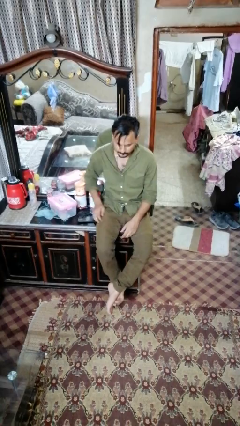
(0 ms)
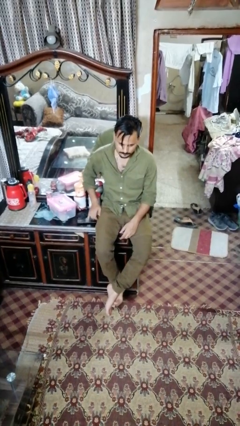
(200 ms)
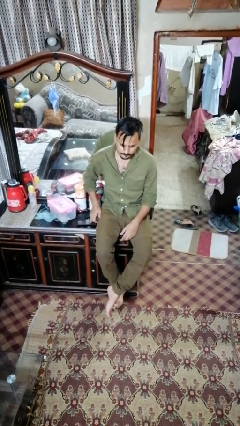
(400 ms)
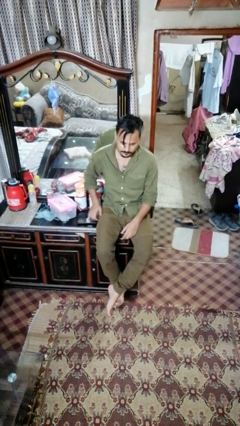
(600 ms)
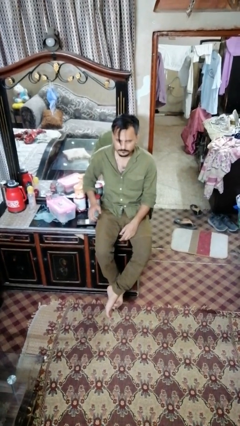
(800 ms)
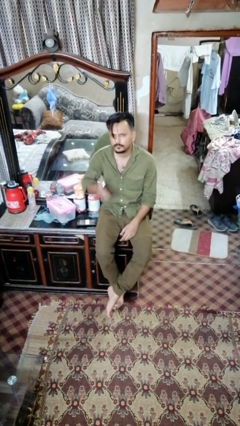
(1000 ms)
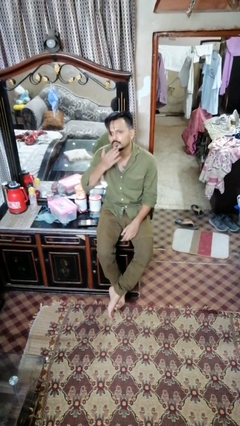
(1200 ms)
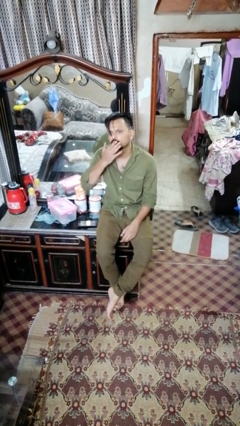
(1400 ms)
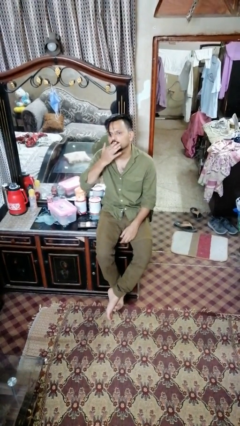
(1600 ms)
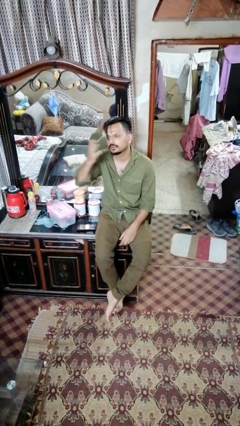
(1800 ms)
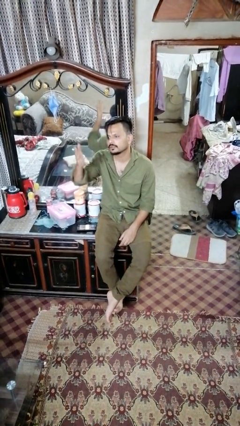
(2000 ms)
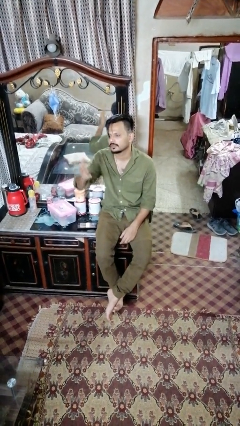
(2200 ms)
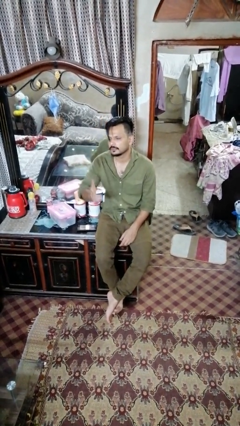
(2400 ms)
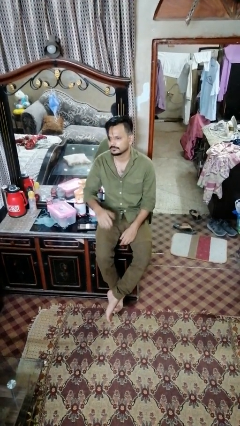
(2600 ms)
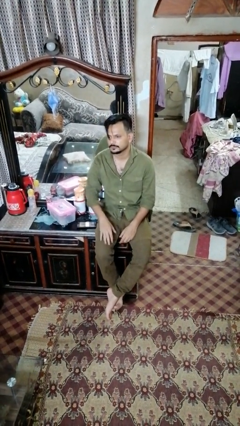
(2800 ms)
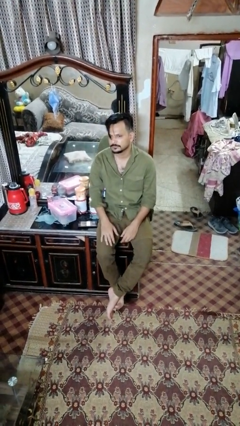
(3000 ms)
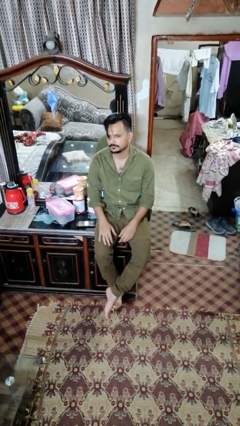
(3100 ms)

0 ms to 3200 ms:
person gestures blow kiss

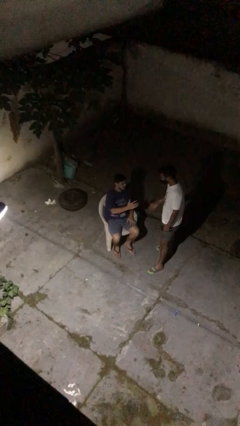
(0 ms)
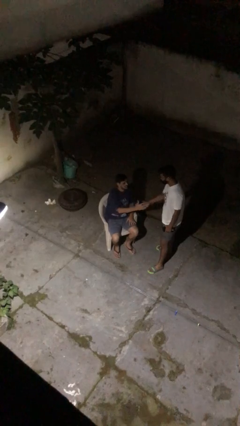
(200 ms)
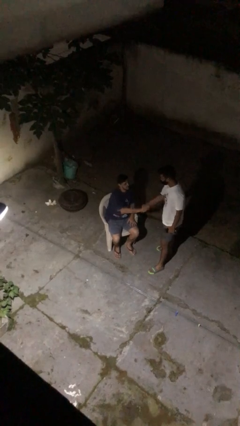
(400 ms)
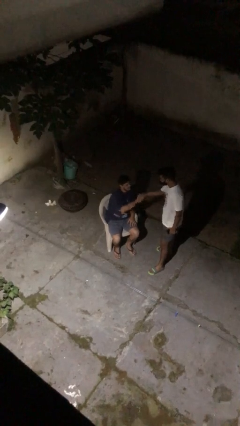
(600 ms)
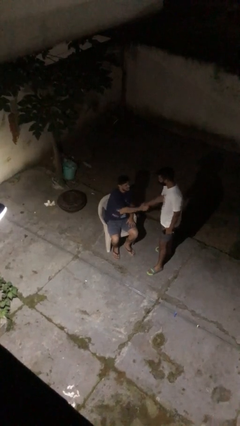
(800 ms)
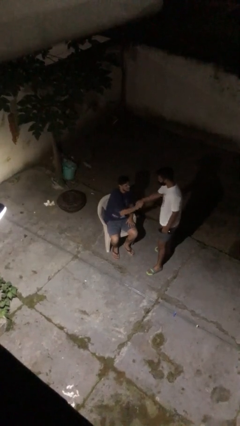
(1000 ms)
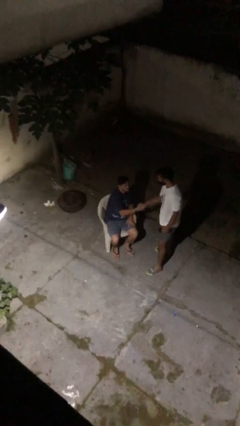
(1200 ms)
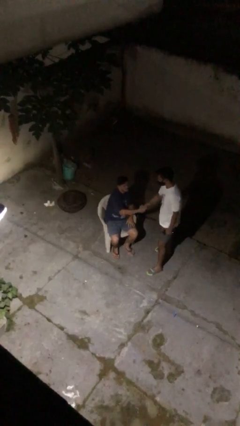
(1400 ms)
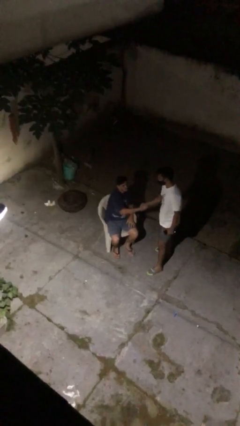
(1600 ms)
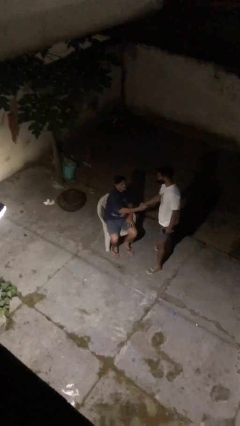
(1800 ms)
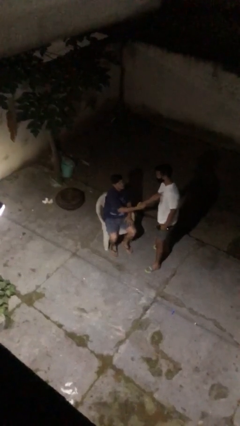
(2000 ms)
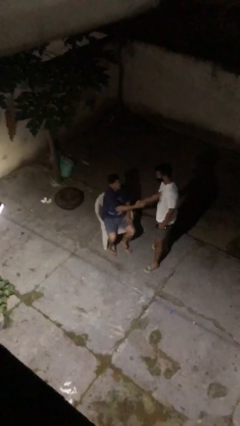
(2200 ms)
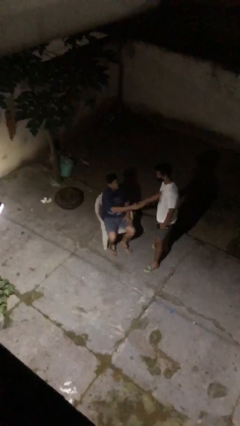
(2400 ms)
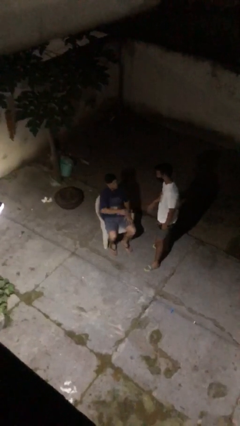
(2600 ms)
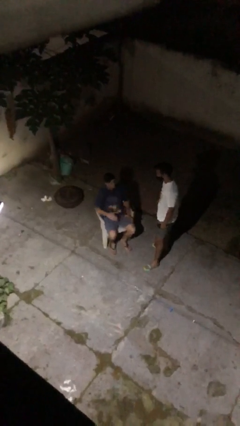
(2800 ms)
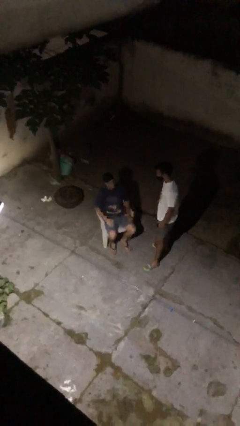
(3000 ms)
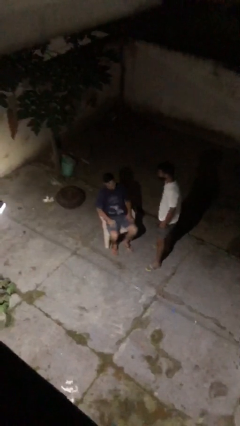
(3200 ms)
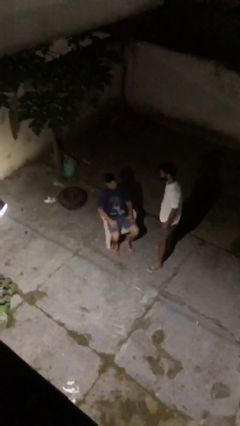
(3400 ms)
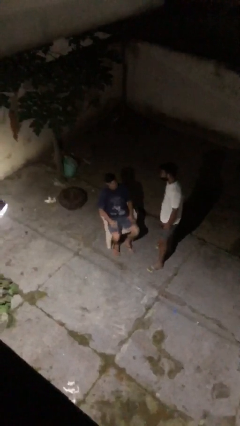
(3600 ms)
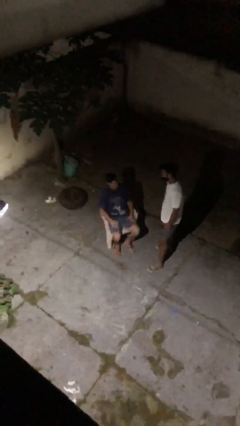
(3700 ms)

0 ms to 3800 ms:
person shakes hand

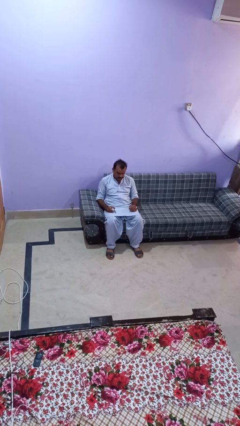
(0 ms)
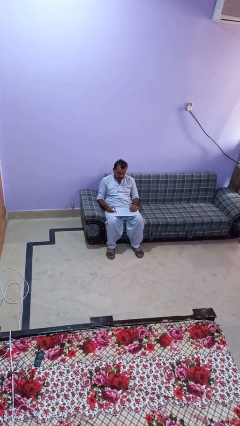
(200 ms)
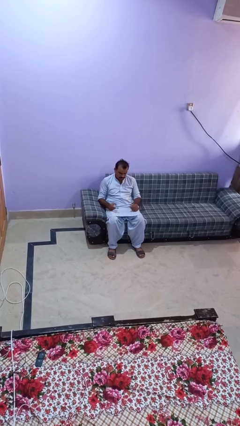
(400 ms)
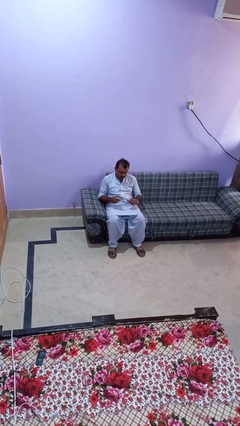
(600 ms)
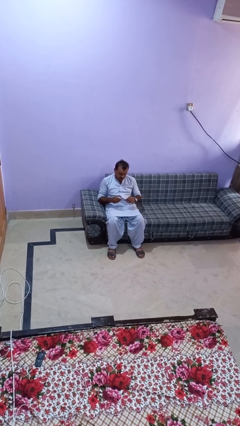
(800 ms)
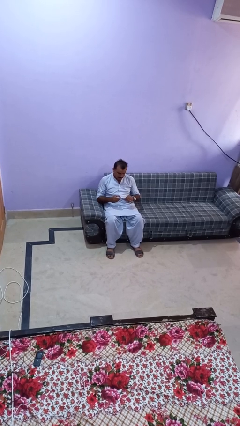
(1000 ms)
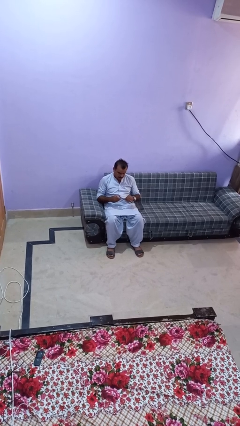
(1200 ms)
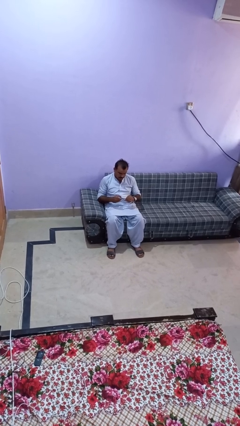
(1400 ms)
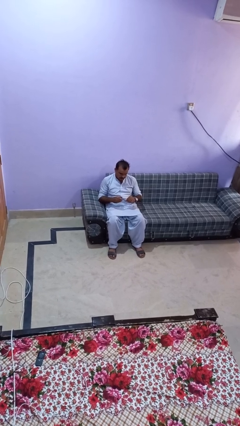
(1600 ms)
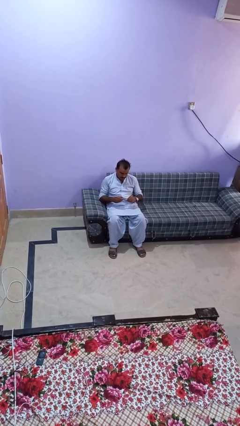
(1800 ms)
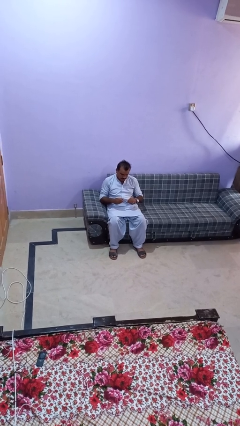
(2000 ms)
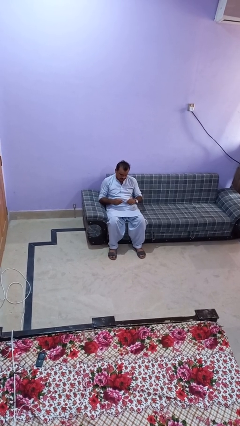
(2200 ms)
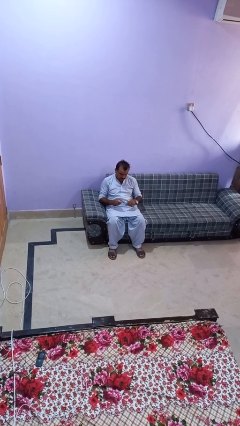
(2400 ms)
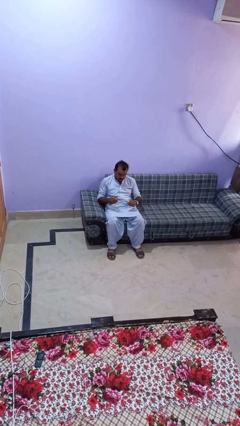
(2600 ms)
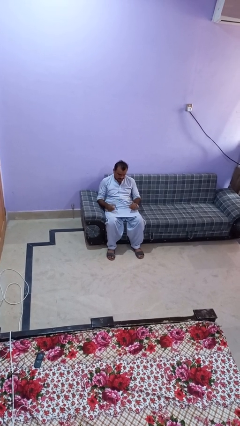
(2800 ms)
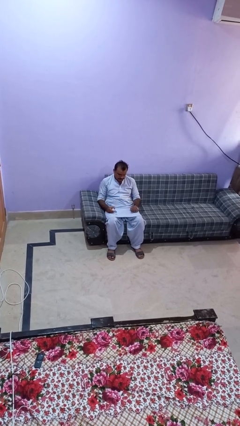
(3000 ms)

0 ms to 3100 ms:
person clips fingernails

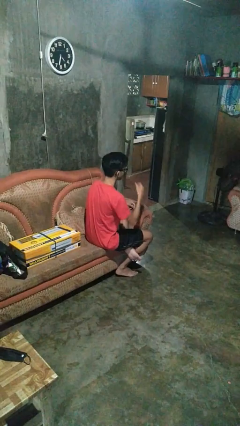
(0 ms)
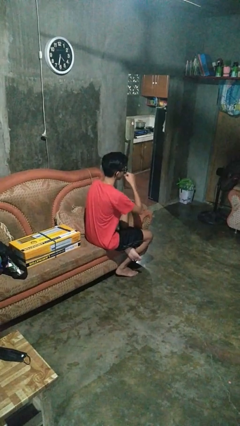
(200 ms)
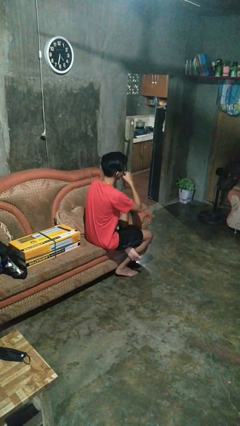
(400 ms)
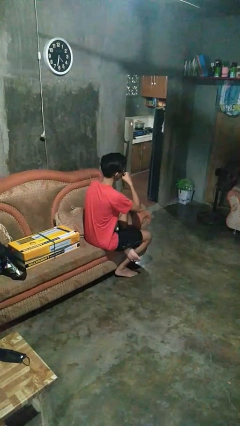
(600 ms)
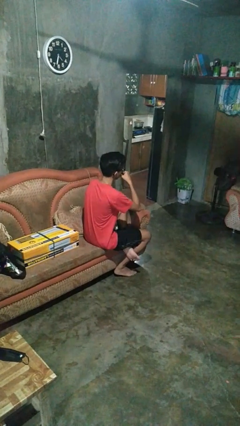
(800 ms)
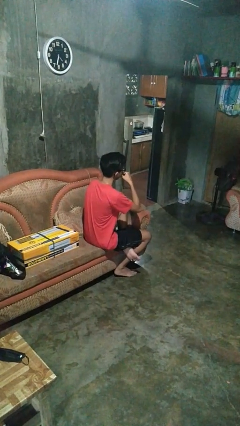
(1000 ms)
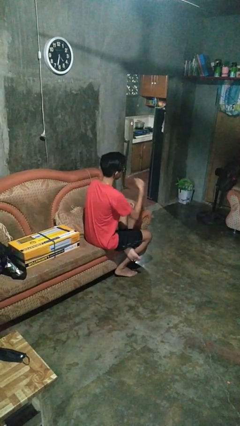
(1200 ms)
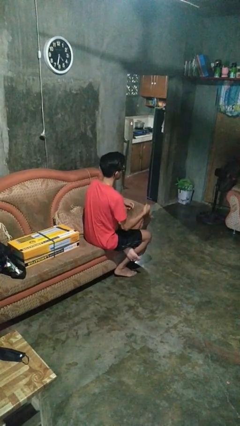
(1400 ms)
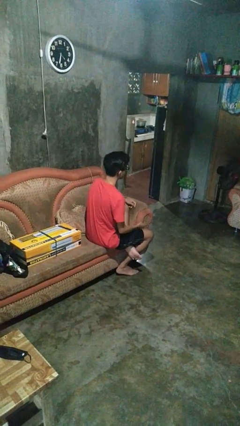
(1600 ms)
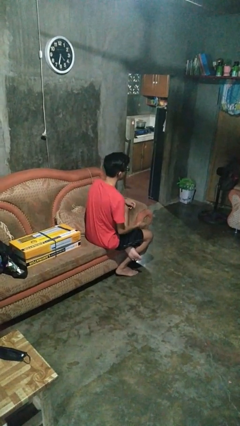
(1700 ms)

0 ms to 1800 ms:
person licks fingers

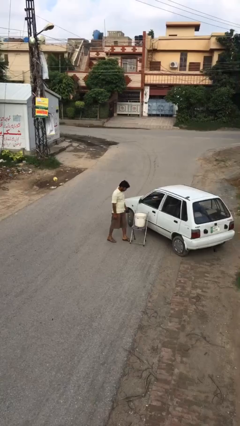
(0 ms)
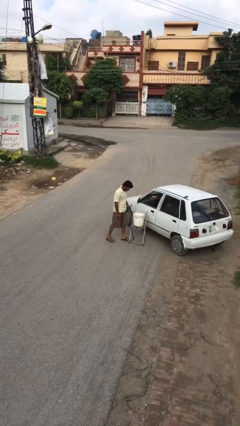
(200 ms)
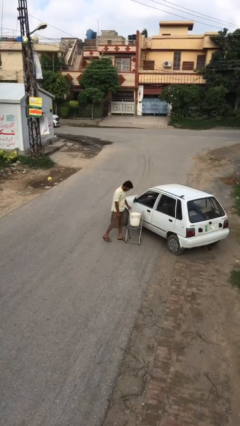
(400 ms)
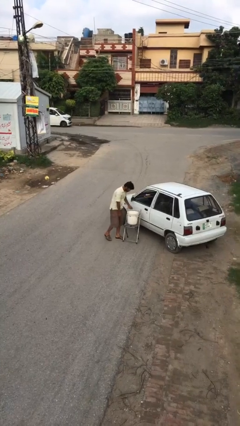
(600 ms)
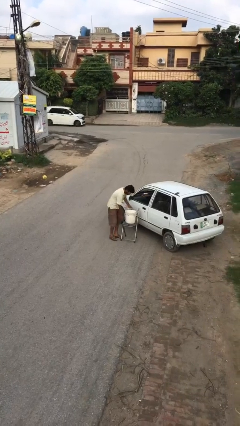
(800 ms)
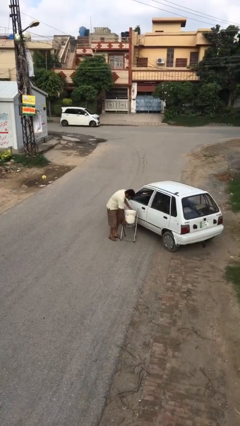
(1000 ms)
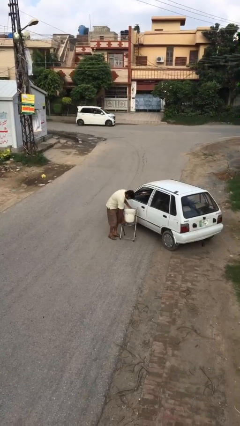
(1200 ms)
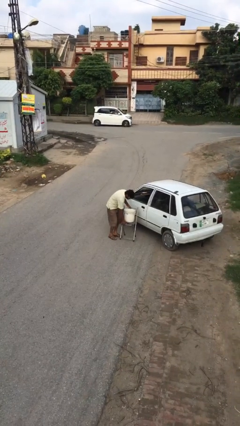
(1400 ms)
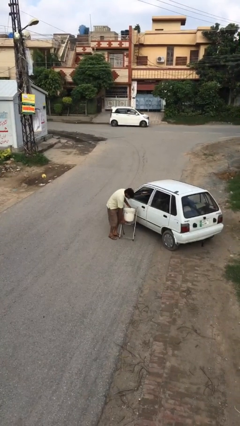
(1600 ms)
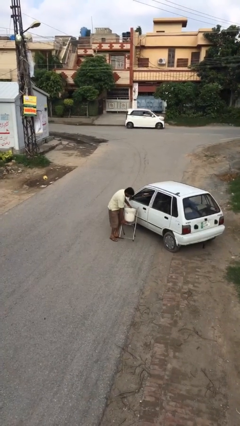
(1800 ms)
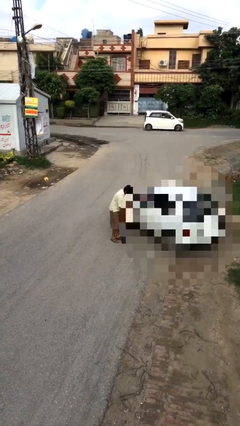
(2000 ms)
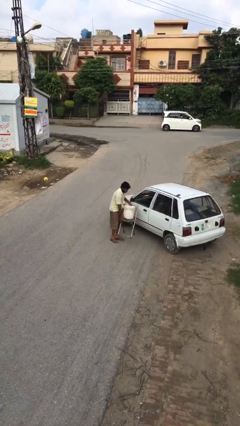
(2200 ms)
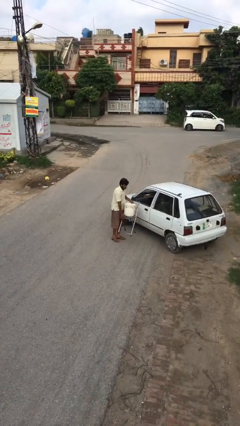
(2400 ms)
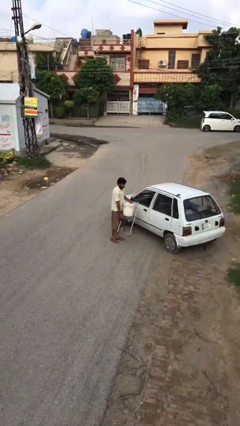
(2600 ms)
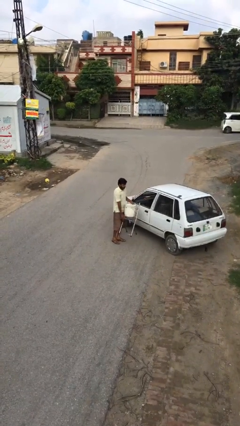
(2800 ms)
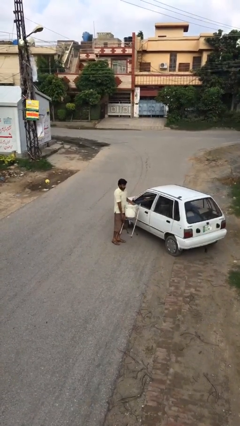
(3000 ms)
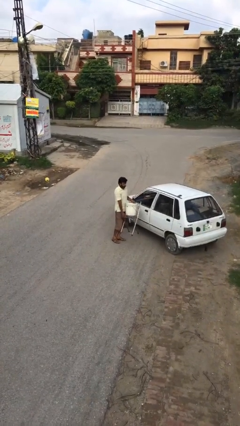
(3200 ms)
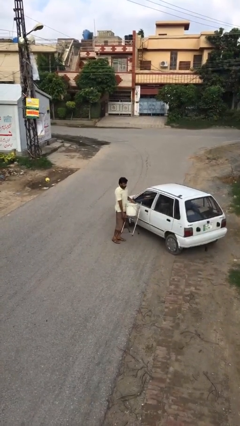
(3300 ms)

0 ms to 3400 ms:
person picks up object from floor

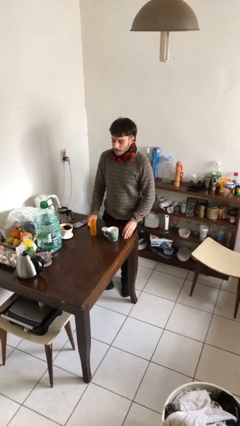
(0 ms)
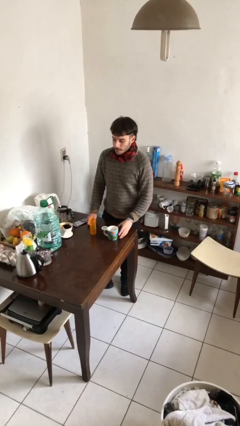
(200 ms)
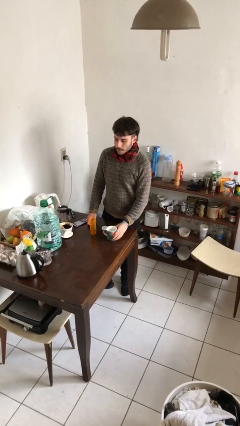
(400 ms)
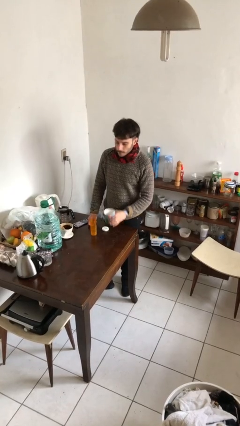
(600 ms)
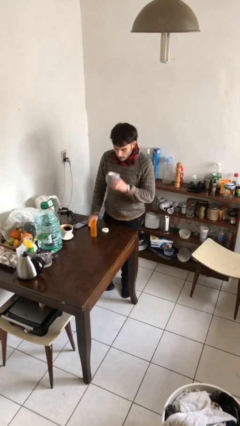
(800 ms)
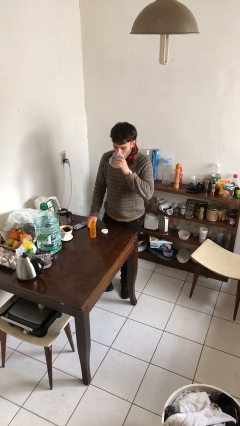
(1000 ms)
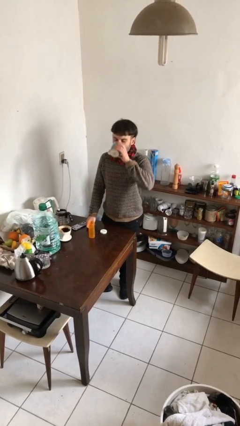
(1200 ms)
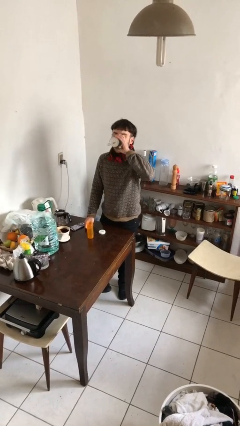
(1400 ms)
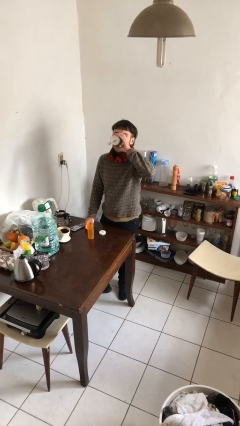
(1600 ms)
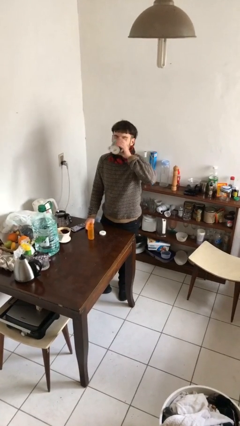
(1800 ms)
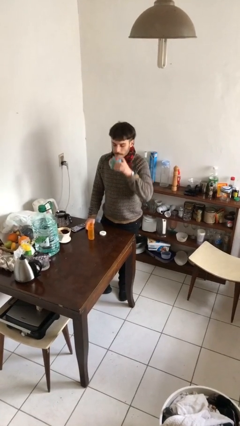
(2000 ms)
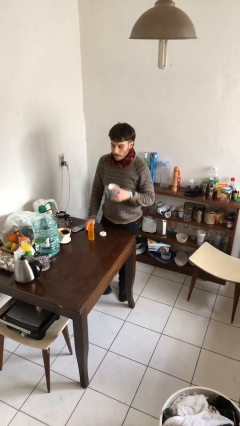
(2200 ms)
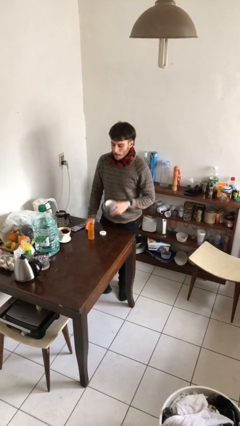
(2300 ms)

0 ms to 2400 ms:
person drinks from cup
